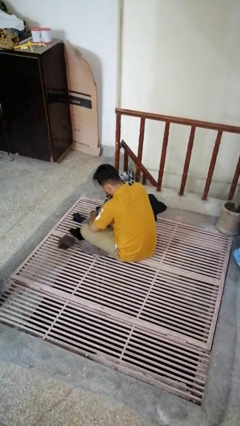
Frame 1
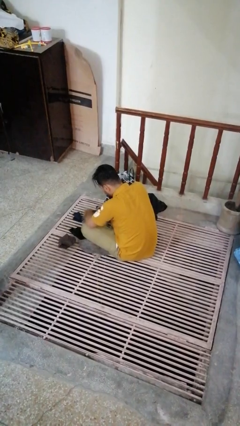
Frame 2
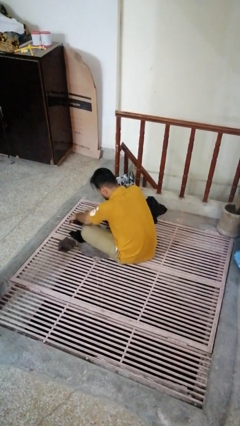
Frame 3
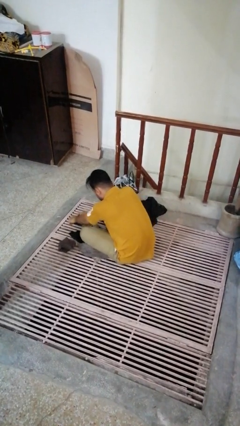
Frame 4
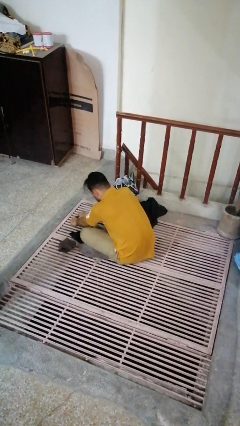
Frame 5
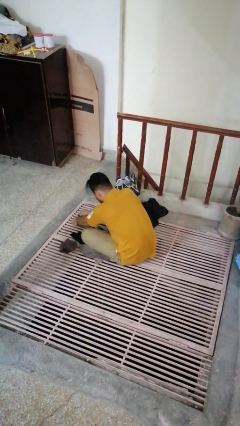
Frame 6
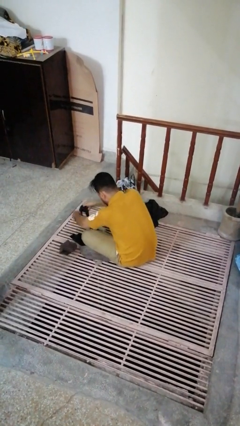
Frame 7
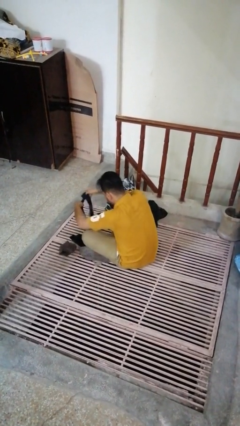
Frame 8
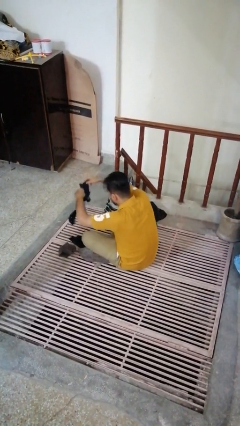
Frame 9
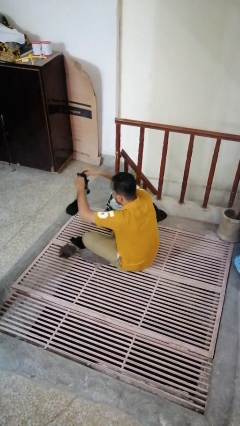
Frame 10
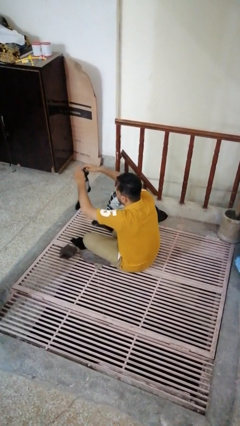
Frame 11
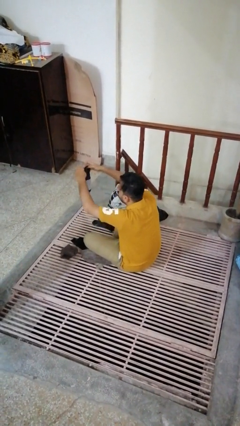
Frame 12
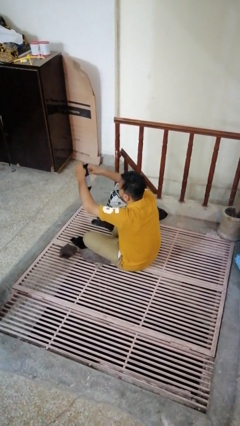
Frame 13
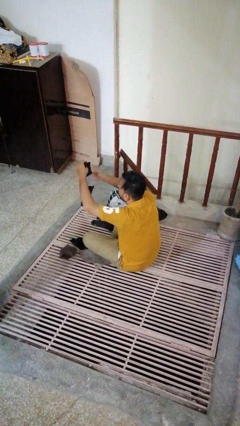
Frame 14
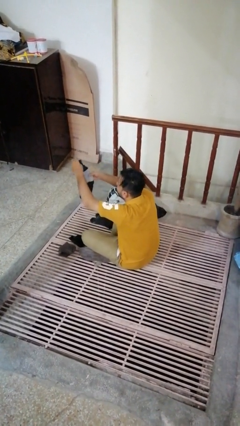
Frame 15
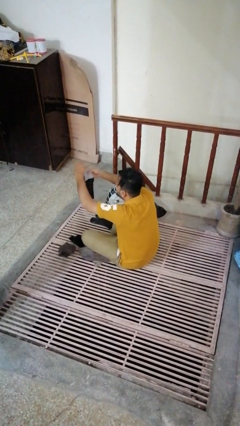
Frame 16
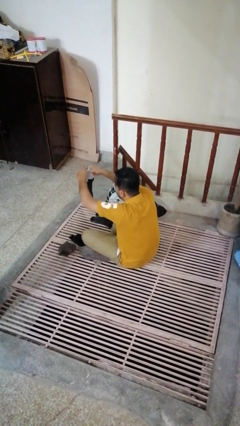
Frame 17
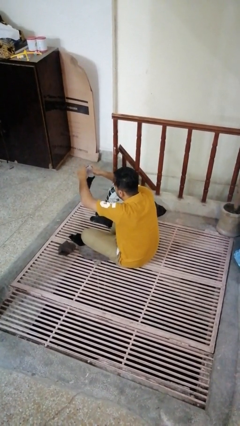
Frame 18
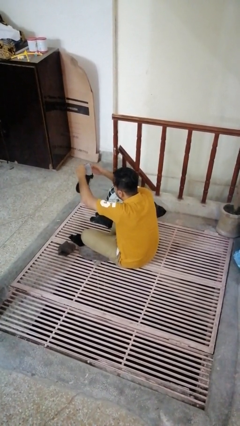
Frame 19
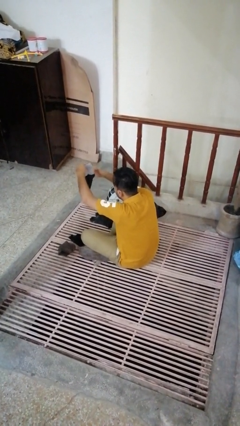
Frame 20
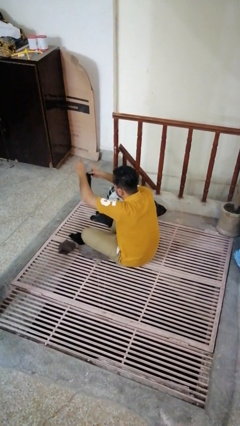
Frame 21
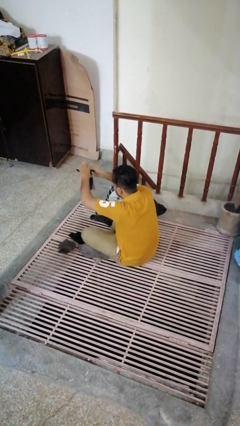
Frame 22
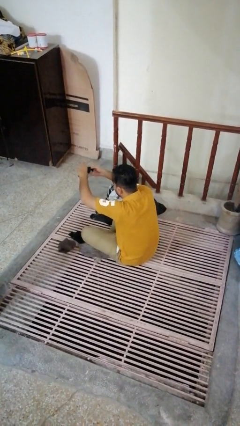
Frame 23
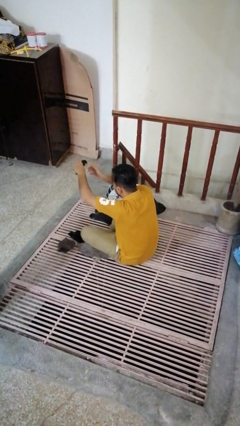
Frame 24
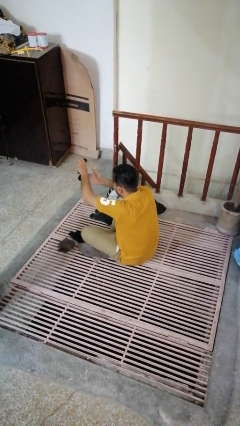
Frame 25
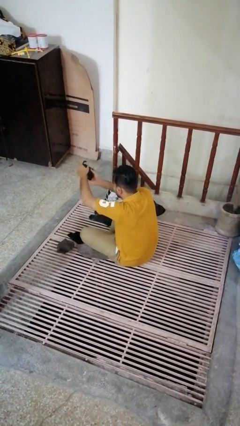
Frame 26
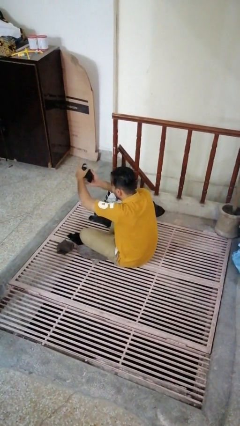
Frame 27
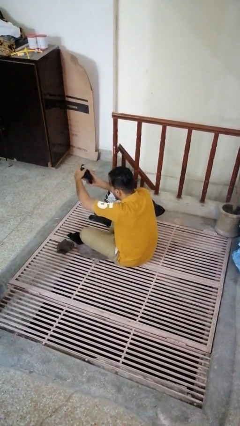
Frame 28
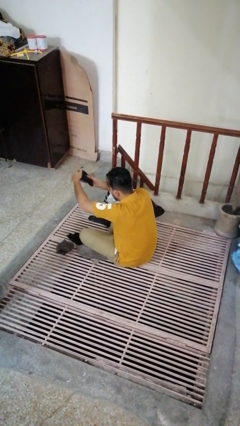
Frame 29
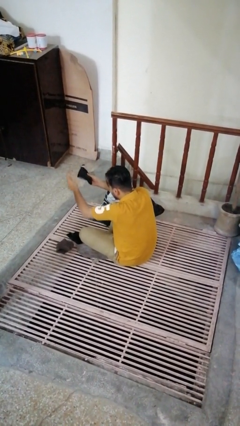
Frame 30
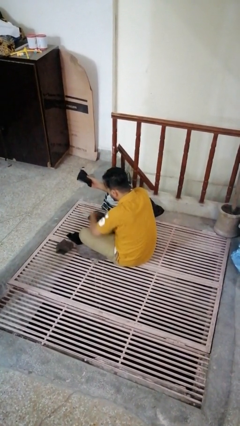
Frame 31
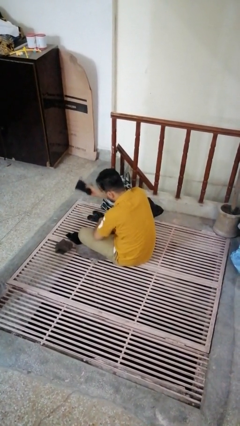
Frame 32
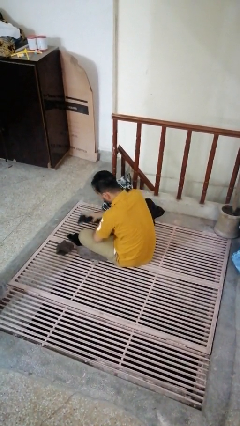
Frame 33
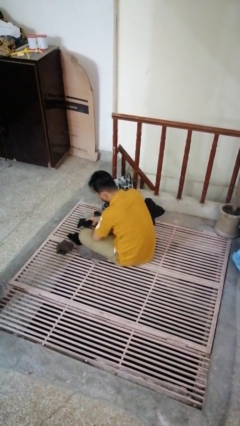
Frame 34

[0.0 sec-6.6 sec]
person folds socks

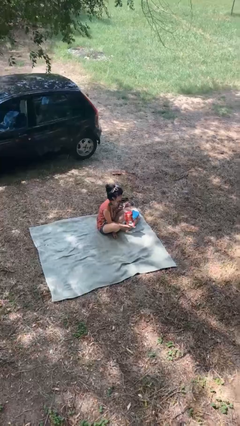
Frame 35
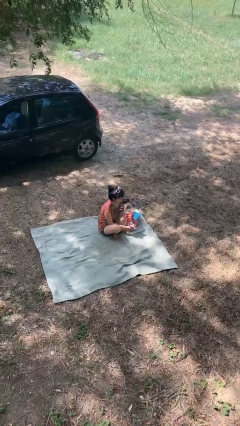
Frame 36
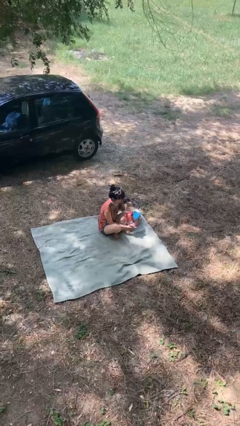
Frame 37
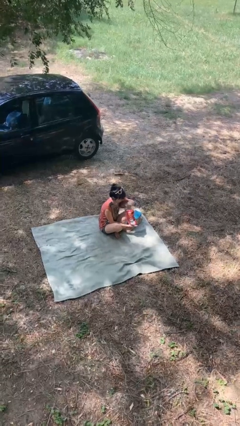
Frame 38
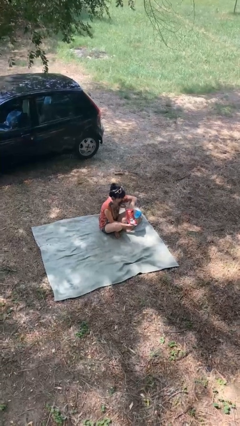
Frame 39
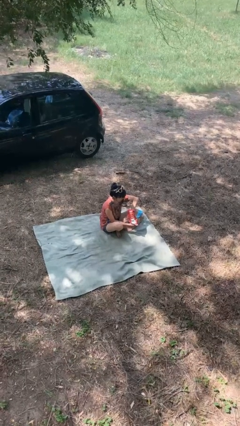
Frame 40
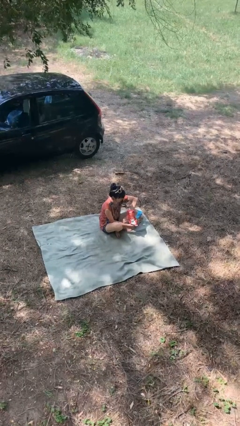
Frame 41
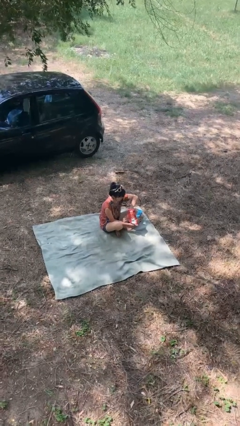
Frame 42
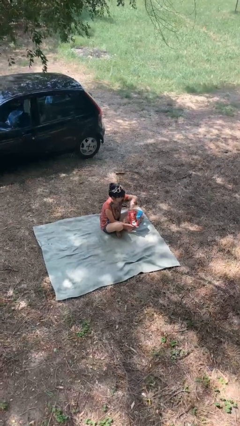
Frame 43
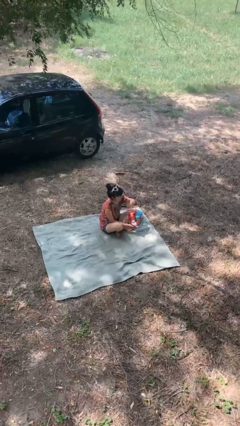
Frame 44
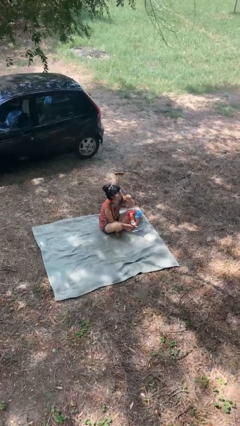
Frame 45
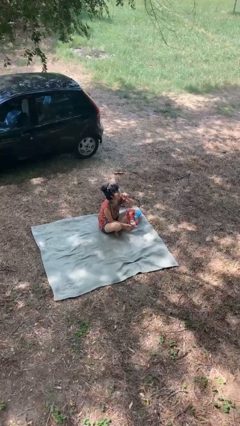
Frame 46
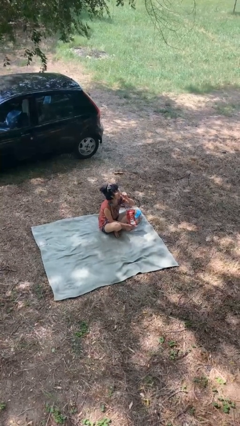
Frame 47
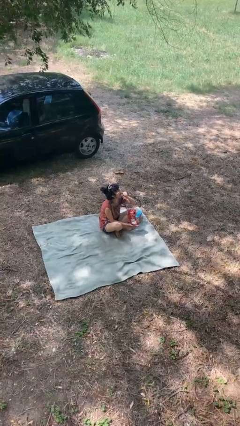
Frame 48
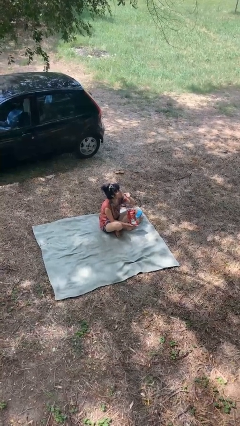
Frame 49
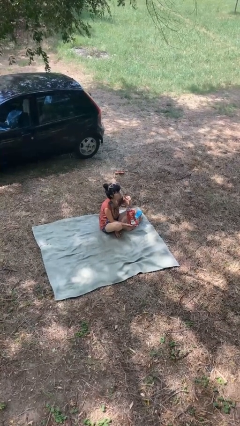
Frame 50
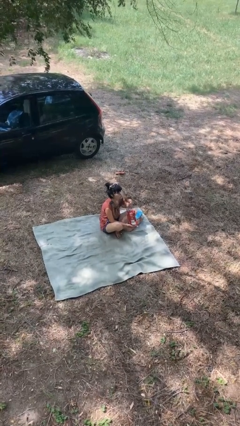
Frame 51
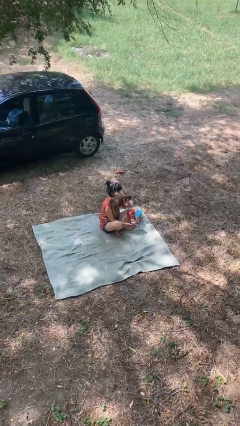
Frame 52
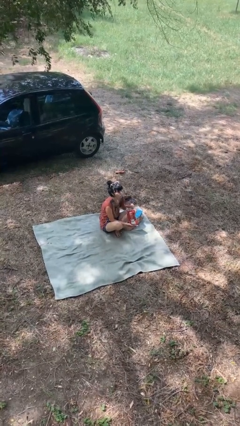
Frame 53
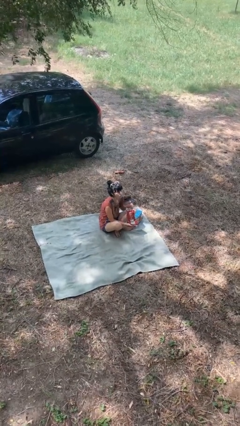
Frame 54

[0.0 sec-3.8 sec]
person eats snack from bag

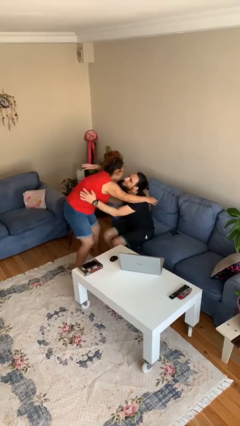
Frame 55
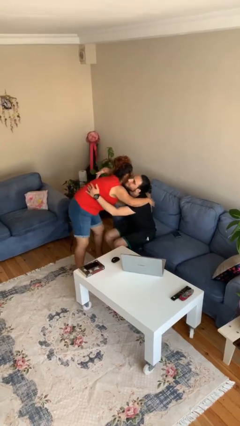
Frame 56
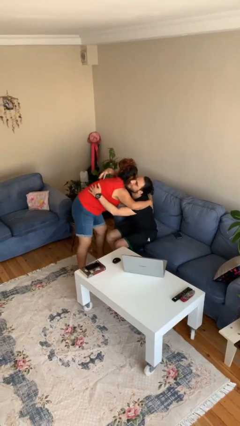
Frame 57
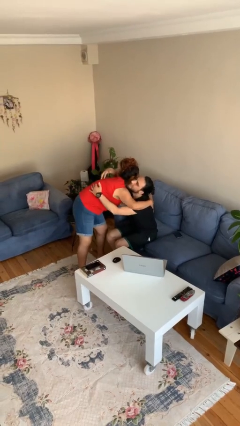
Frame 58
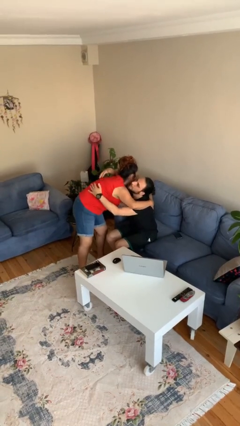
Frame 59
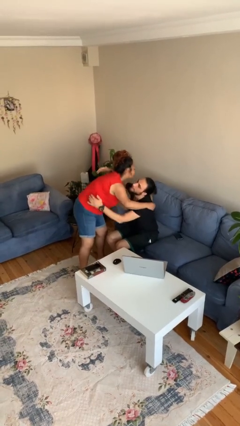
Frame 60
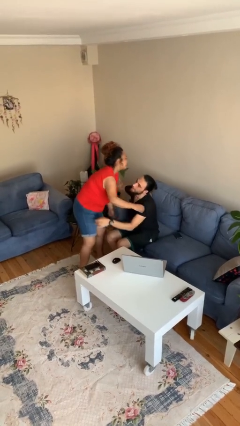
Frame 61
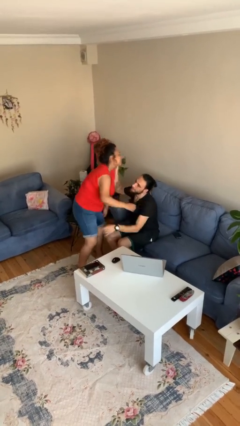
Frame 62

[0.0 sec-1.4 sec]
person embraces person

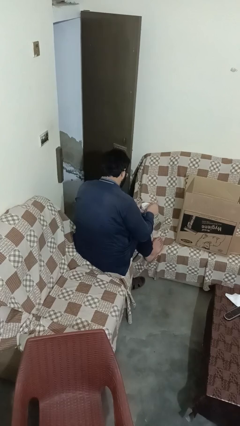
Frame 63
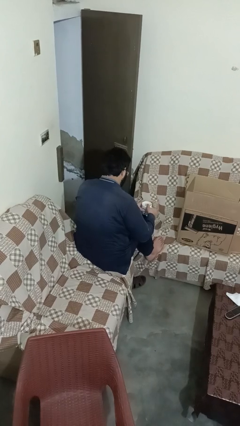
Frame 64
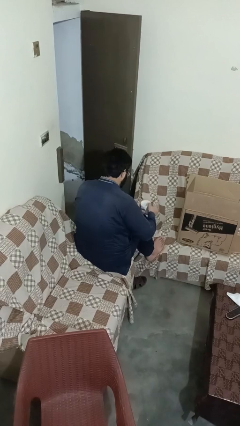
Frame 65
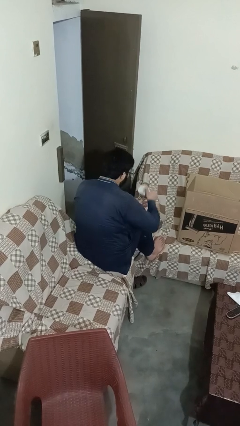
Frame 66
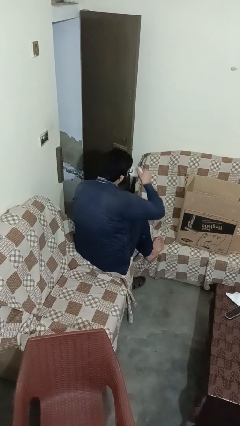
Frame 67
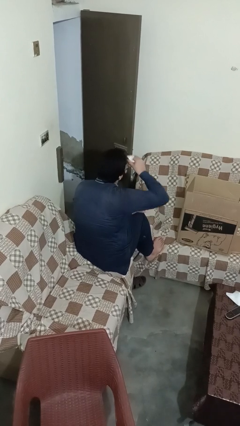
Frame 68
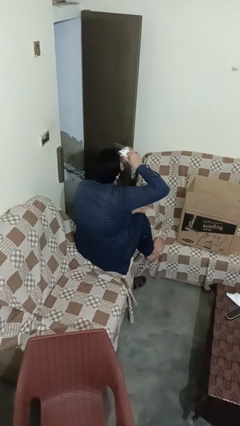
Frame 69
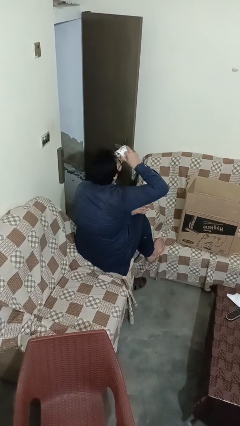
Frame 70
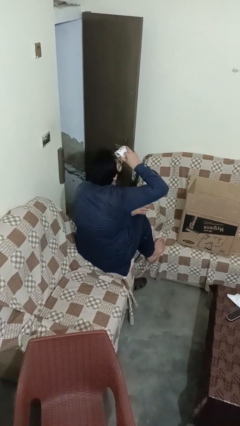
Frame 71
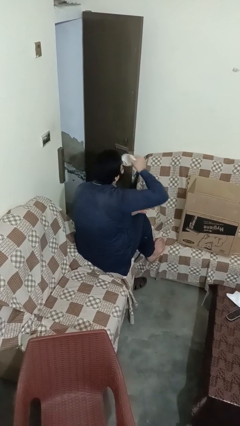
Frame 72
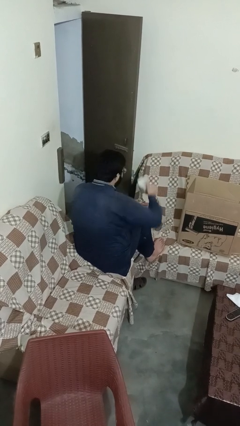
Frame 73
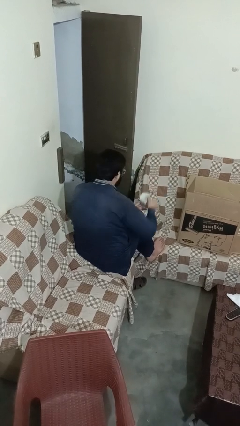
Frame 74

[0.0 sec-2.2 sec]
person drinks from mug

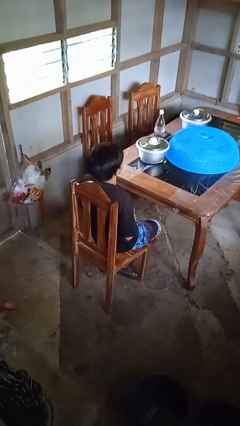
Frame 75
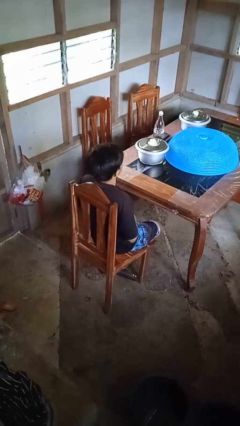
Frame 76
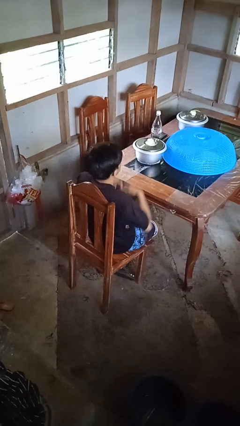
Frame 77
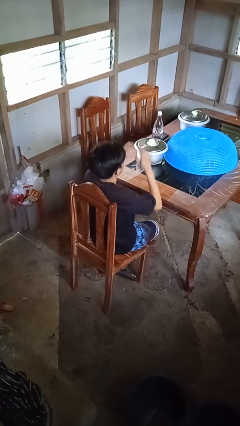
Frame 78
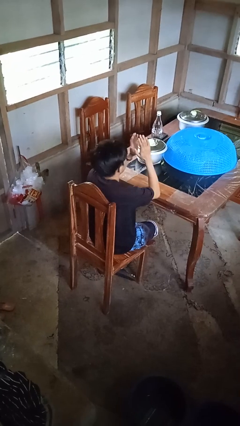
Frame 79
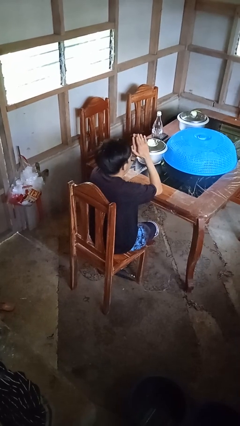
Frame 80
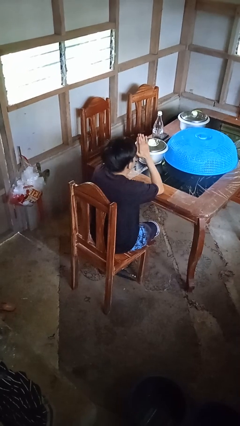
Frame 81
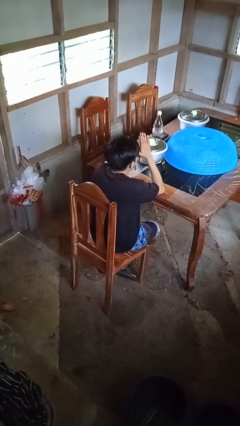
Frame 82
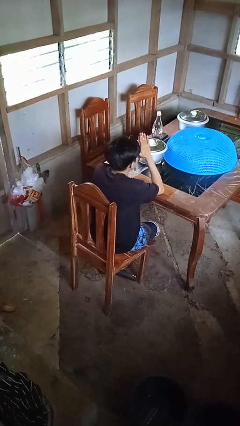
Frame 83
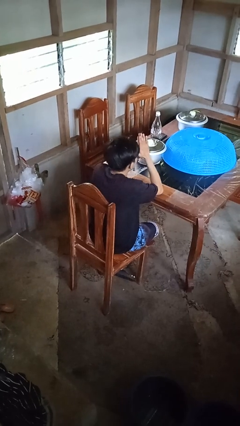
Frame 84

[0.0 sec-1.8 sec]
person prays

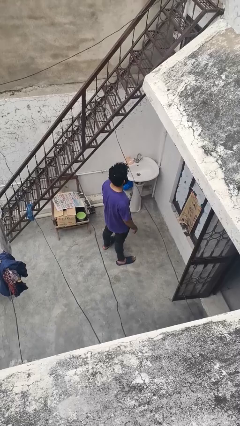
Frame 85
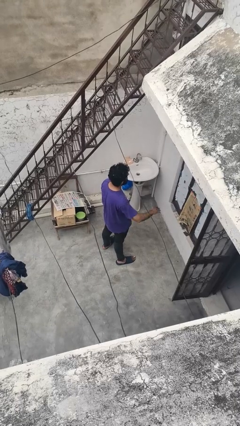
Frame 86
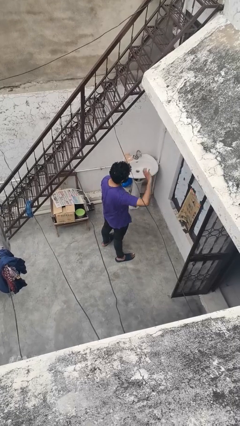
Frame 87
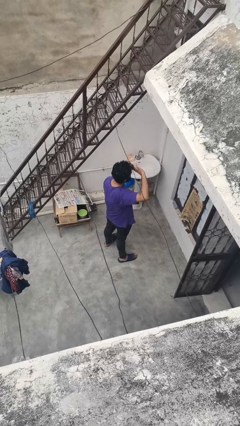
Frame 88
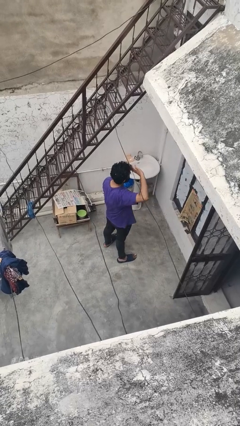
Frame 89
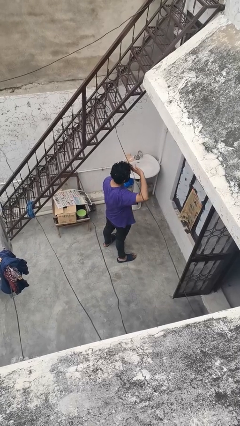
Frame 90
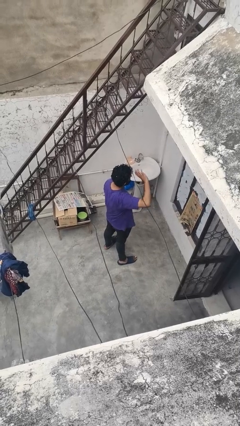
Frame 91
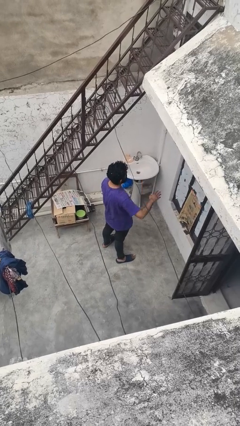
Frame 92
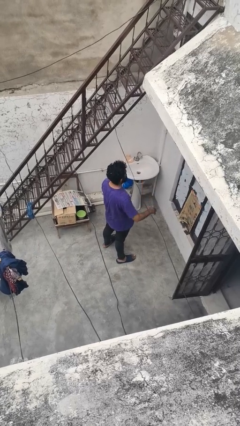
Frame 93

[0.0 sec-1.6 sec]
person salutes
